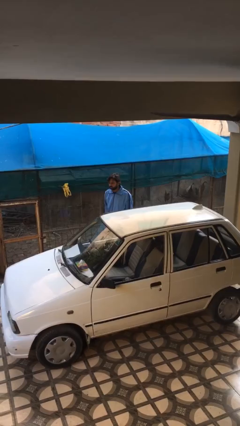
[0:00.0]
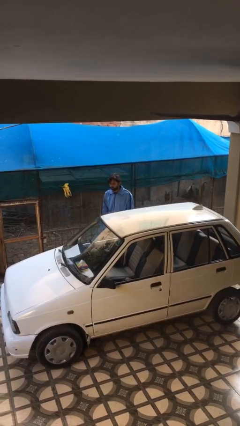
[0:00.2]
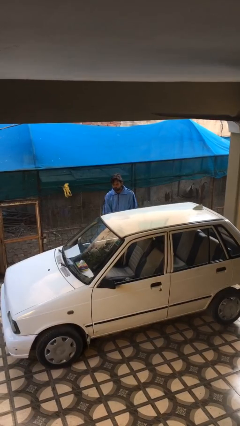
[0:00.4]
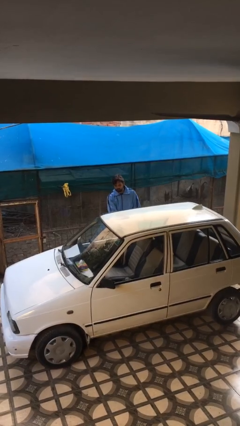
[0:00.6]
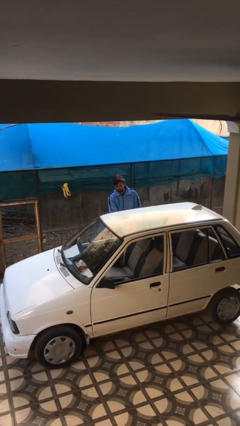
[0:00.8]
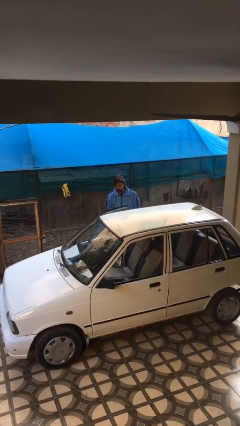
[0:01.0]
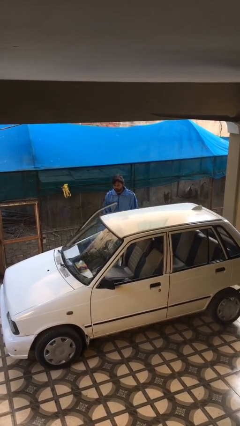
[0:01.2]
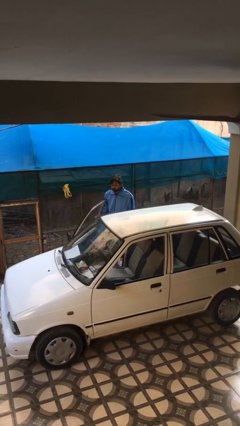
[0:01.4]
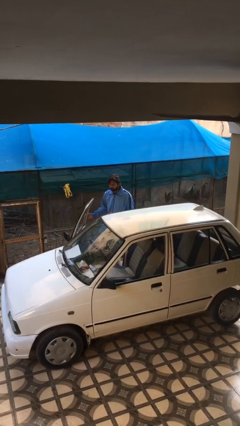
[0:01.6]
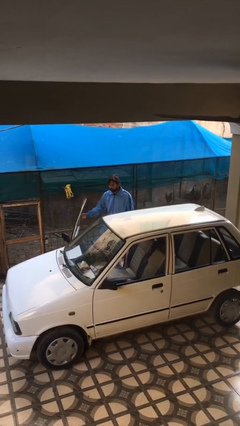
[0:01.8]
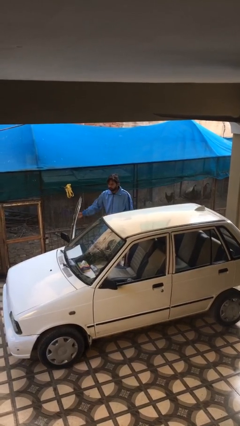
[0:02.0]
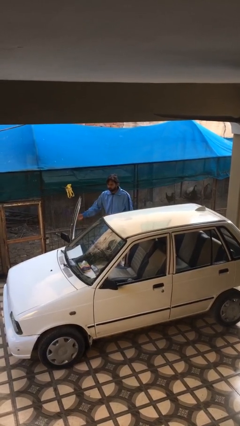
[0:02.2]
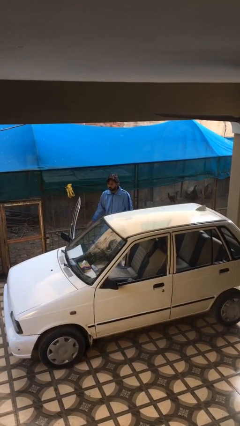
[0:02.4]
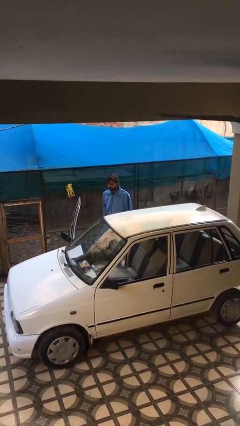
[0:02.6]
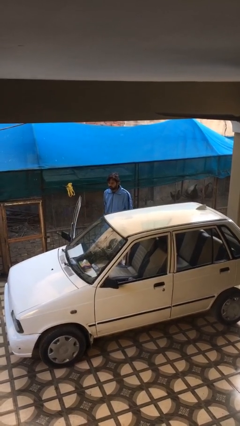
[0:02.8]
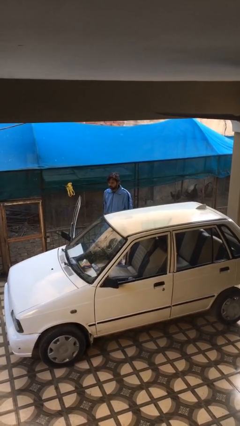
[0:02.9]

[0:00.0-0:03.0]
person opens car door

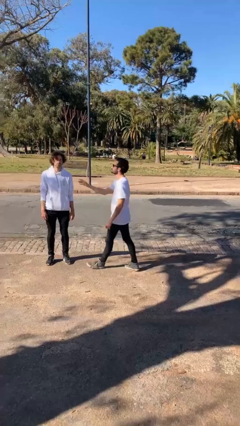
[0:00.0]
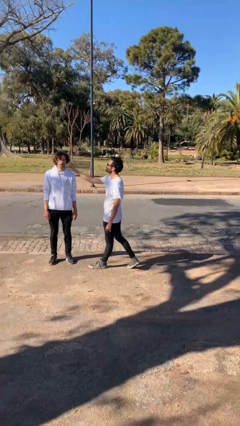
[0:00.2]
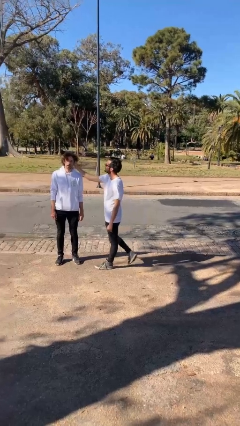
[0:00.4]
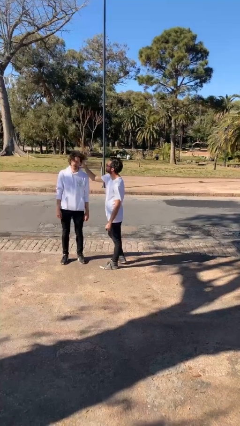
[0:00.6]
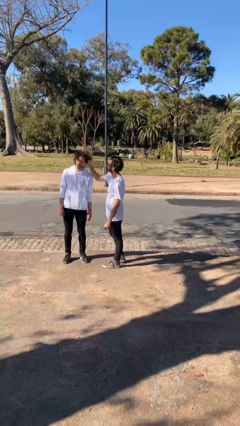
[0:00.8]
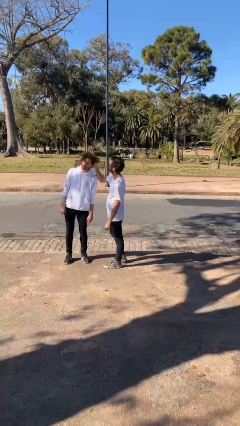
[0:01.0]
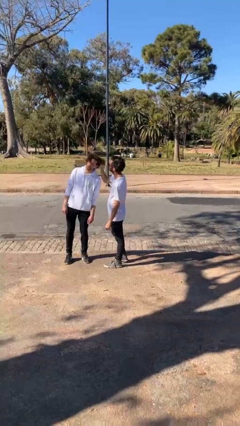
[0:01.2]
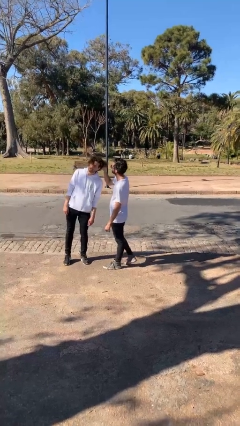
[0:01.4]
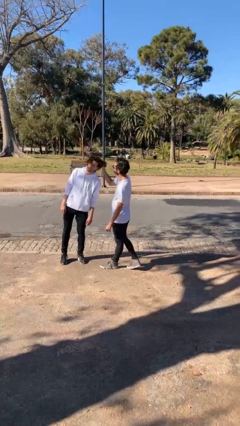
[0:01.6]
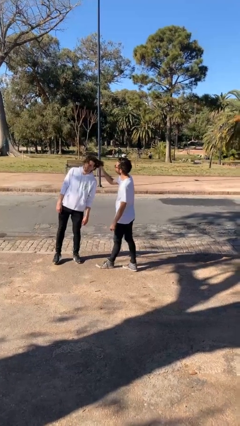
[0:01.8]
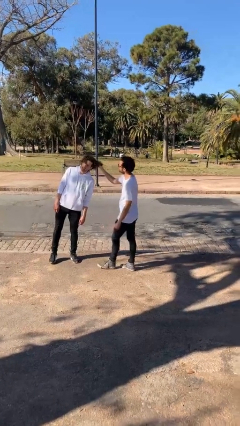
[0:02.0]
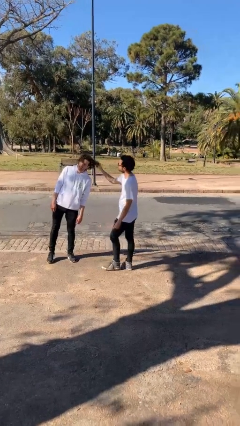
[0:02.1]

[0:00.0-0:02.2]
person grabs person by hair

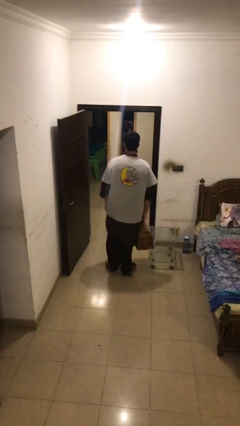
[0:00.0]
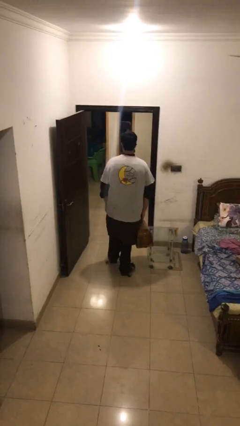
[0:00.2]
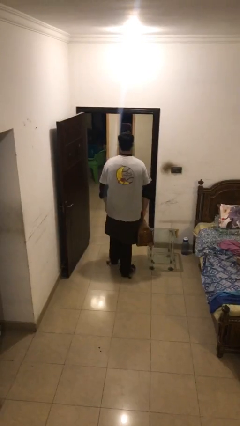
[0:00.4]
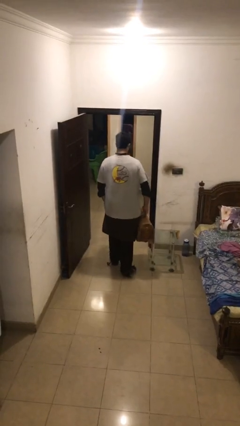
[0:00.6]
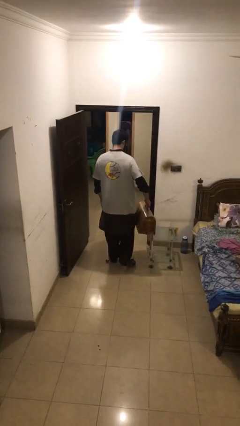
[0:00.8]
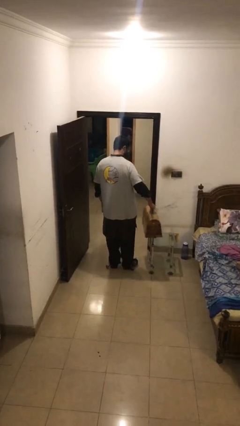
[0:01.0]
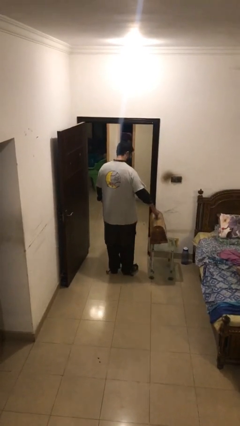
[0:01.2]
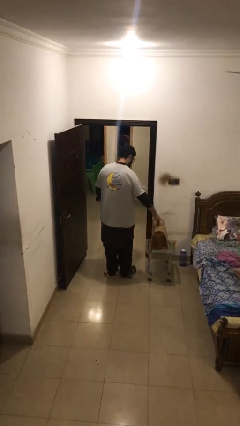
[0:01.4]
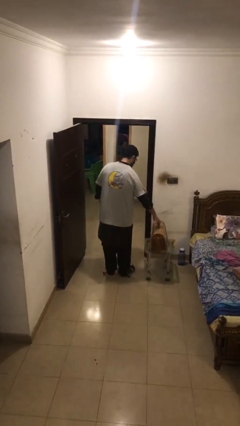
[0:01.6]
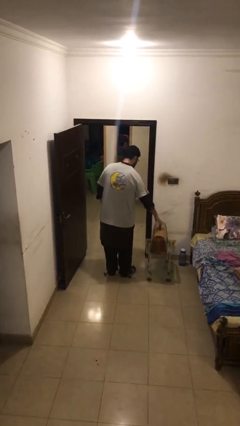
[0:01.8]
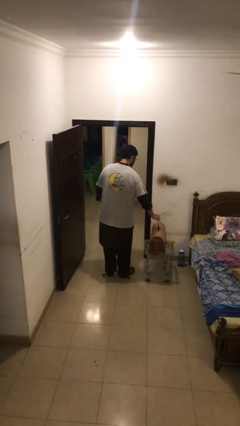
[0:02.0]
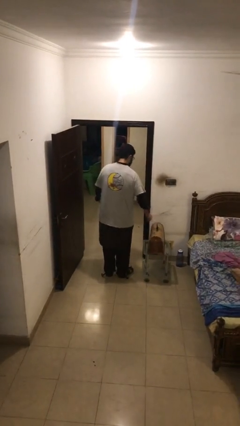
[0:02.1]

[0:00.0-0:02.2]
person puts down object on table

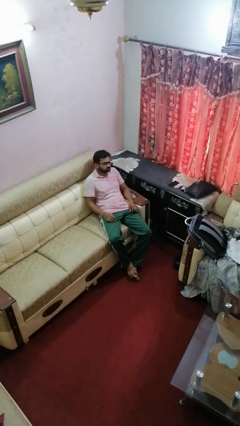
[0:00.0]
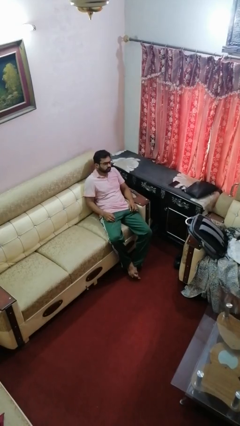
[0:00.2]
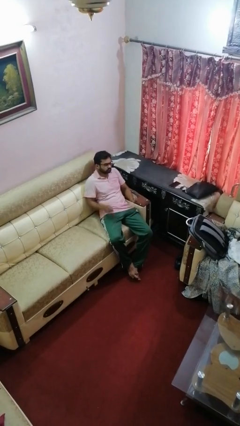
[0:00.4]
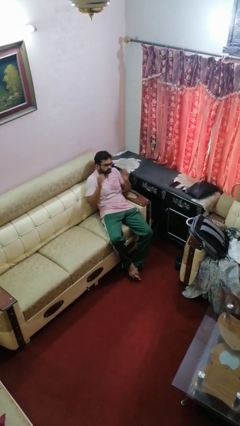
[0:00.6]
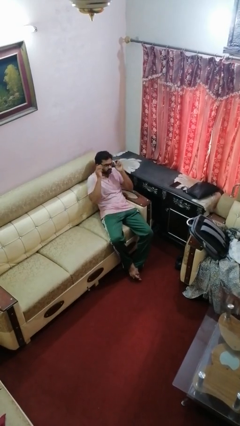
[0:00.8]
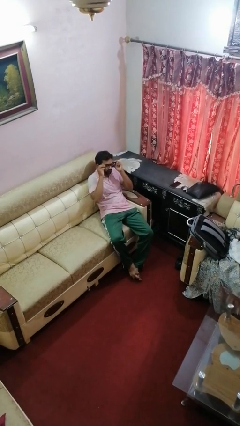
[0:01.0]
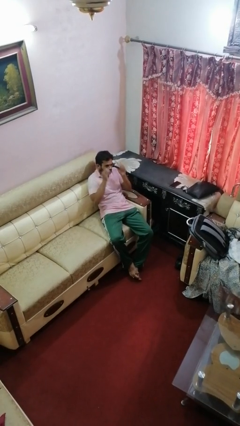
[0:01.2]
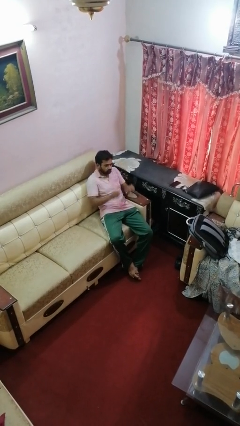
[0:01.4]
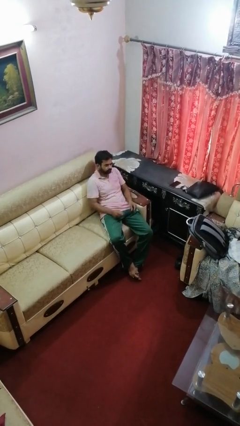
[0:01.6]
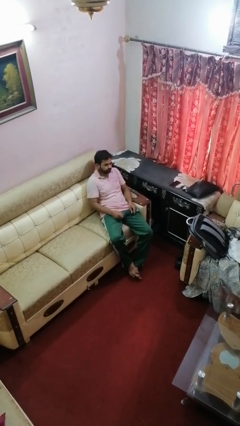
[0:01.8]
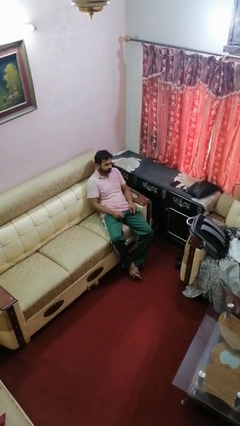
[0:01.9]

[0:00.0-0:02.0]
person takes off glasses

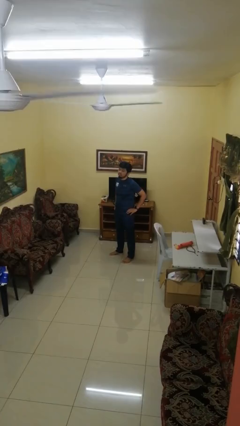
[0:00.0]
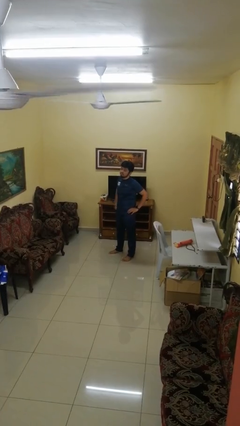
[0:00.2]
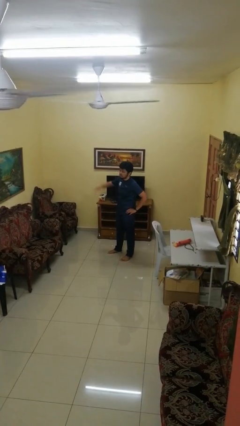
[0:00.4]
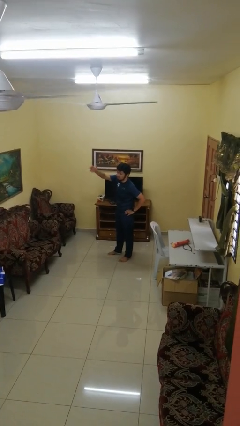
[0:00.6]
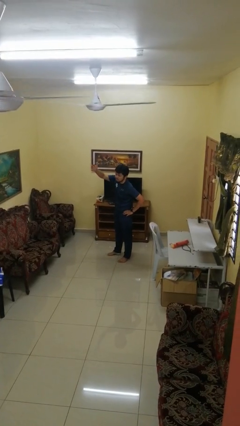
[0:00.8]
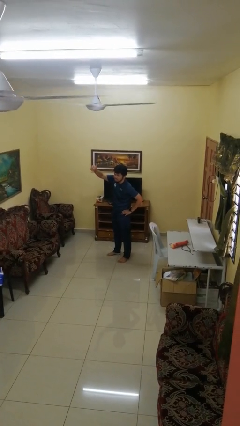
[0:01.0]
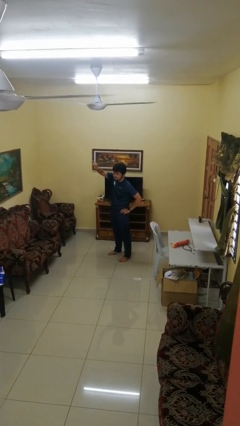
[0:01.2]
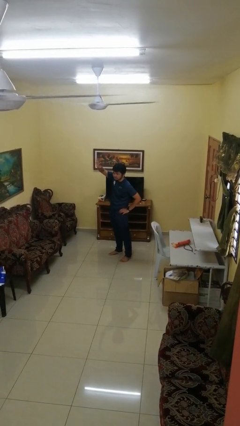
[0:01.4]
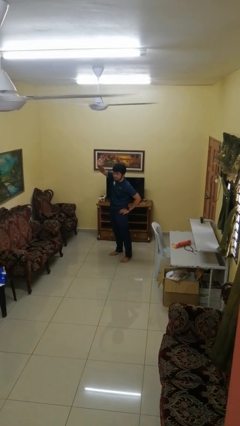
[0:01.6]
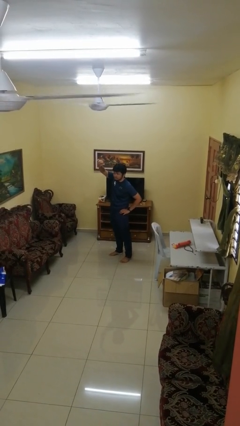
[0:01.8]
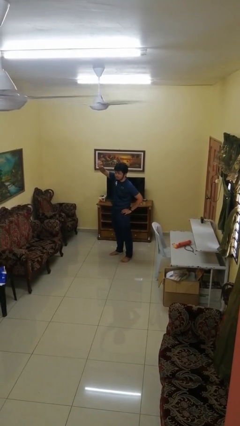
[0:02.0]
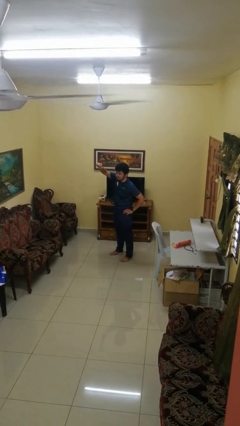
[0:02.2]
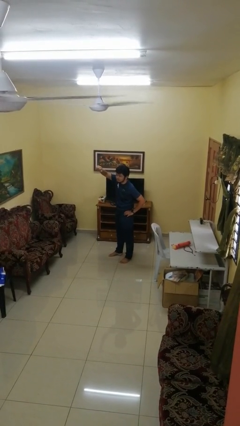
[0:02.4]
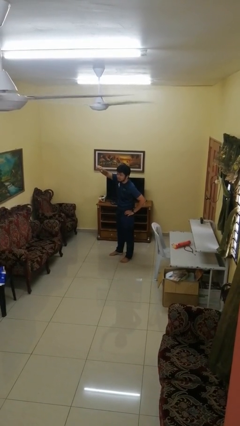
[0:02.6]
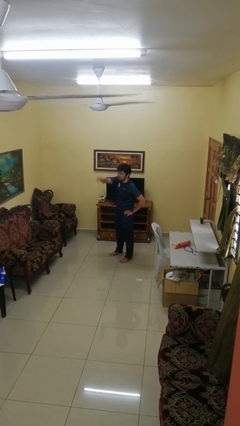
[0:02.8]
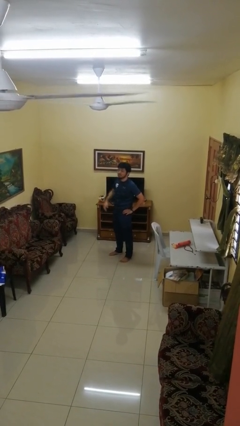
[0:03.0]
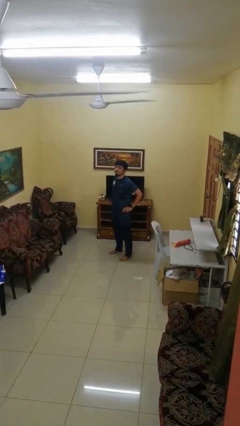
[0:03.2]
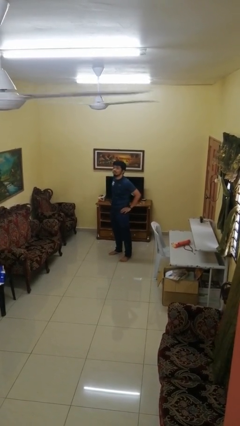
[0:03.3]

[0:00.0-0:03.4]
person gestures come here

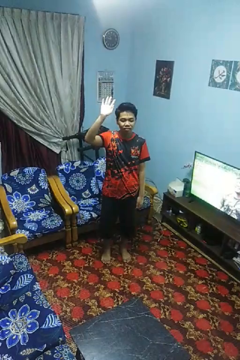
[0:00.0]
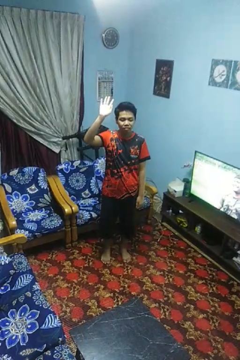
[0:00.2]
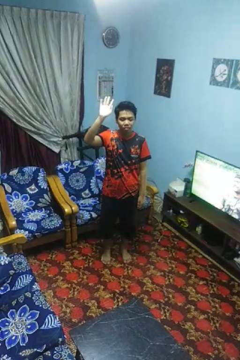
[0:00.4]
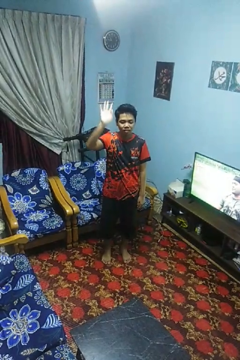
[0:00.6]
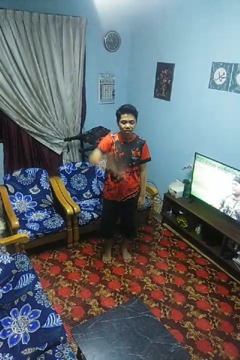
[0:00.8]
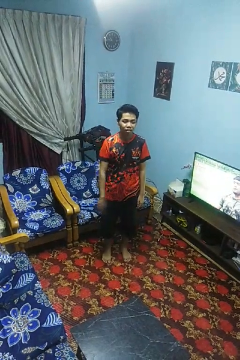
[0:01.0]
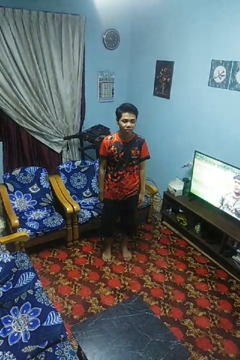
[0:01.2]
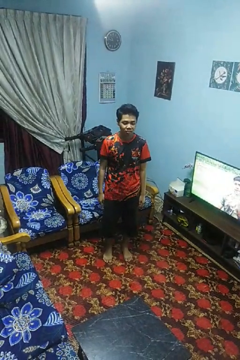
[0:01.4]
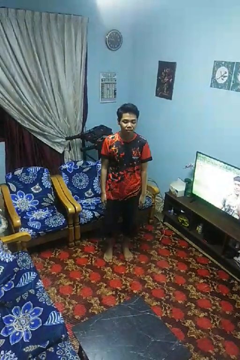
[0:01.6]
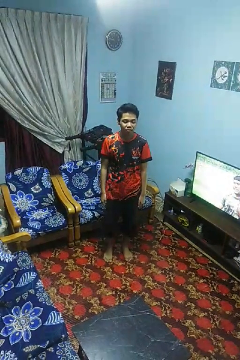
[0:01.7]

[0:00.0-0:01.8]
person gestures swipe down

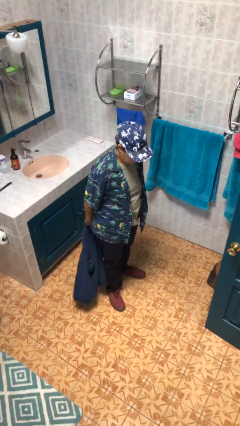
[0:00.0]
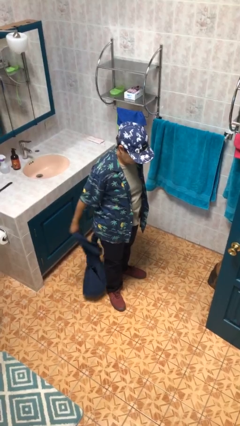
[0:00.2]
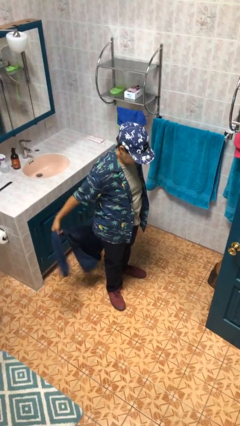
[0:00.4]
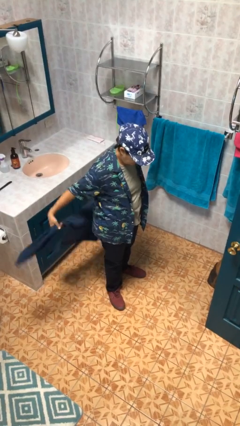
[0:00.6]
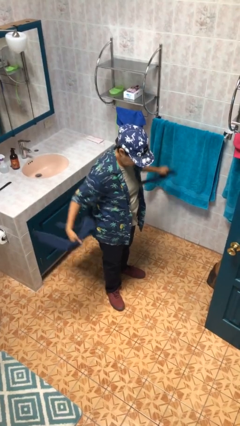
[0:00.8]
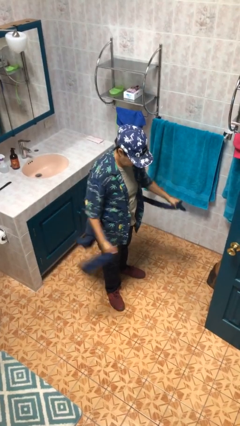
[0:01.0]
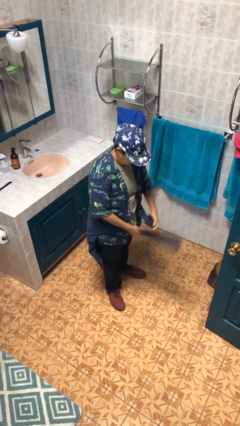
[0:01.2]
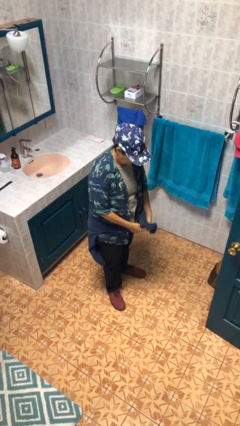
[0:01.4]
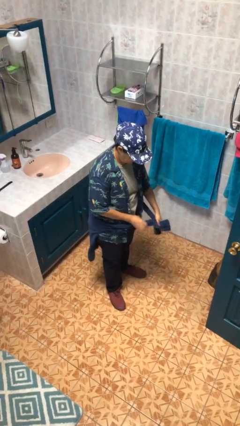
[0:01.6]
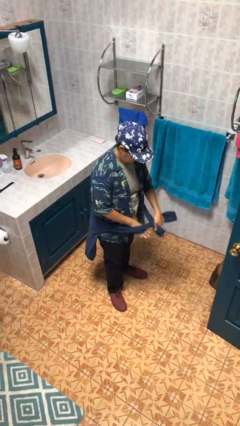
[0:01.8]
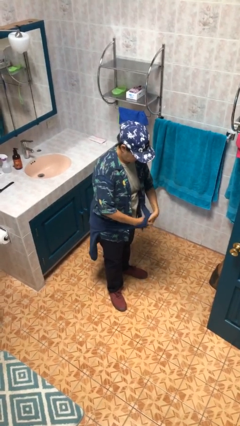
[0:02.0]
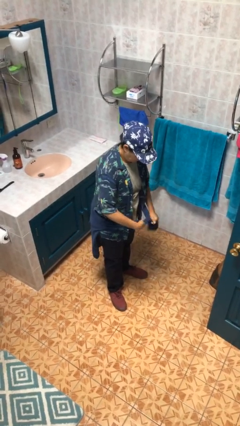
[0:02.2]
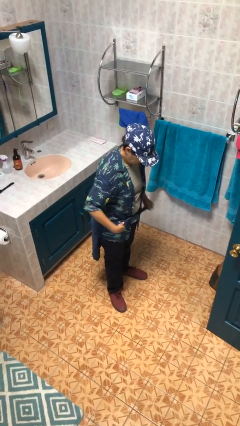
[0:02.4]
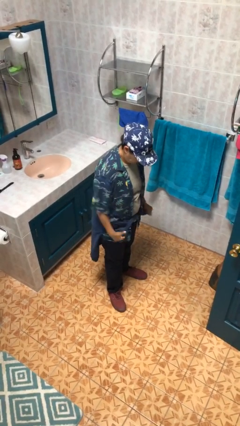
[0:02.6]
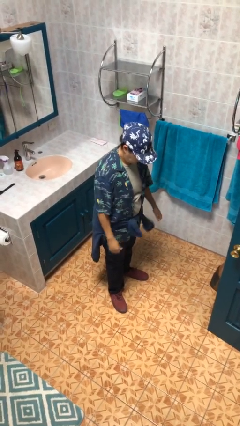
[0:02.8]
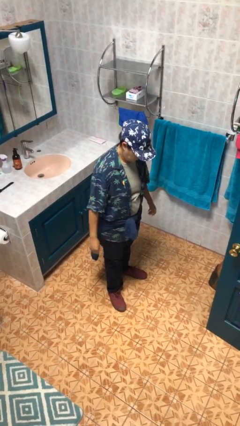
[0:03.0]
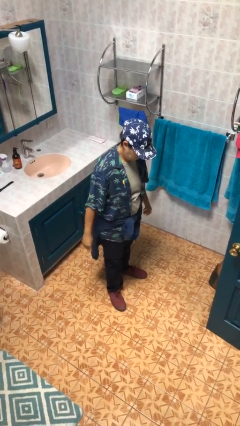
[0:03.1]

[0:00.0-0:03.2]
person ties jacket around waist
